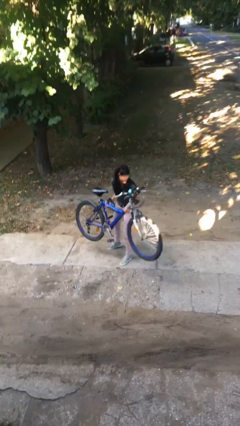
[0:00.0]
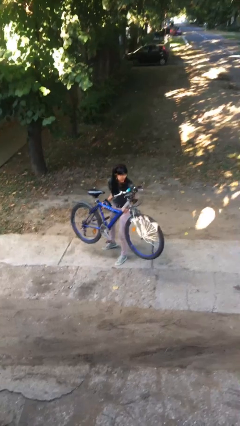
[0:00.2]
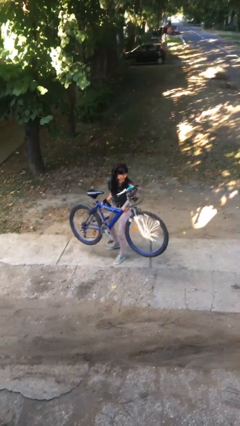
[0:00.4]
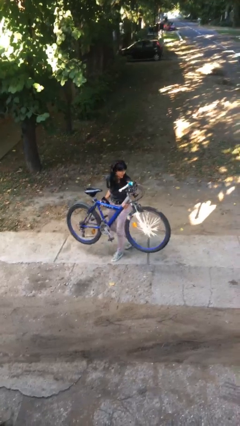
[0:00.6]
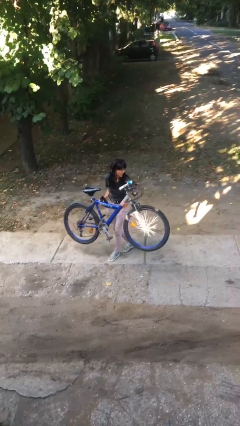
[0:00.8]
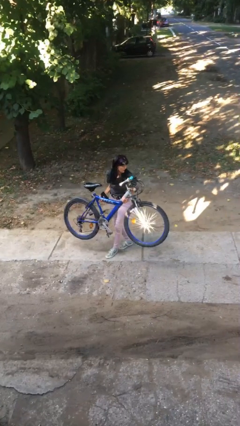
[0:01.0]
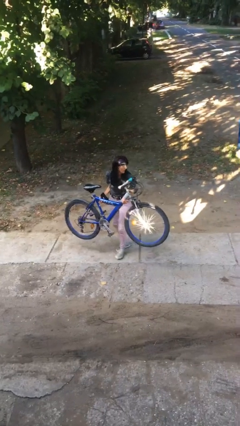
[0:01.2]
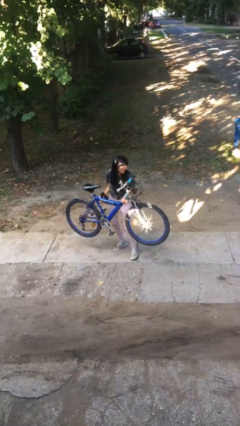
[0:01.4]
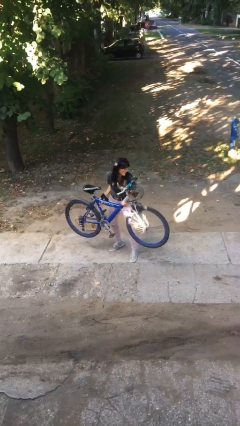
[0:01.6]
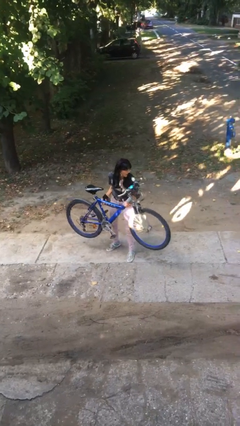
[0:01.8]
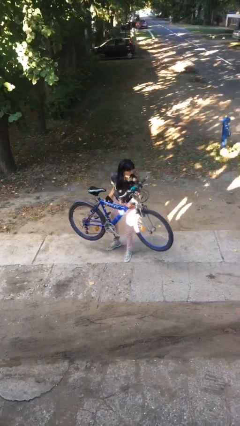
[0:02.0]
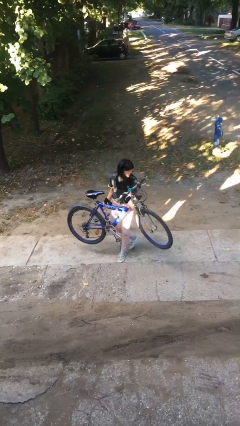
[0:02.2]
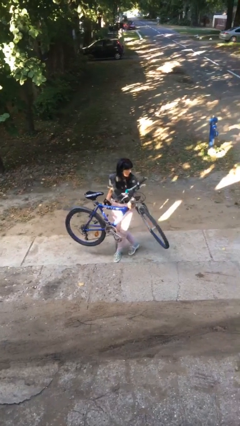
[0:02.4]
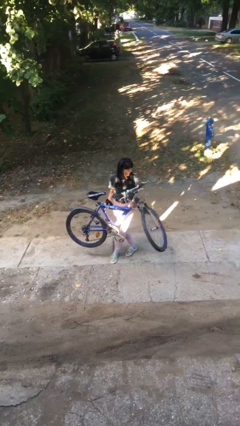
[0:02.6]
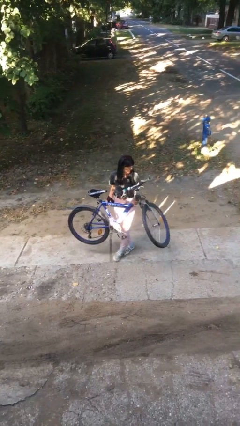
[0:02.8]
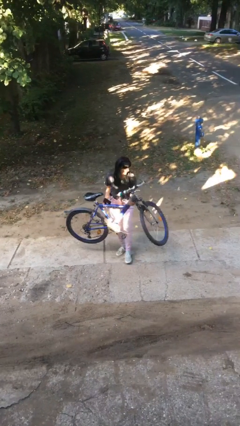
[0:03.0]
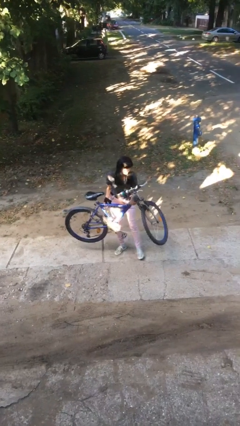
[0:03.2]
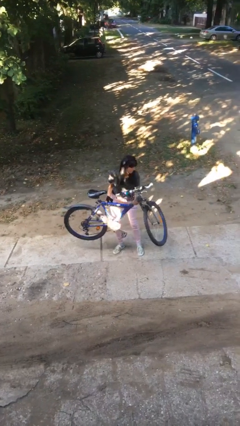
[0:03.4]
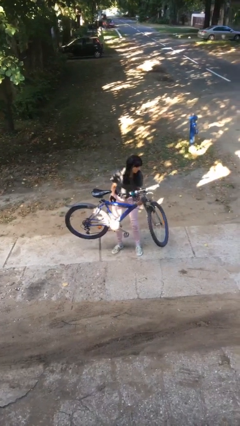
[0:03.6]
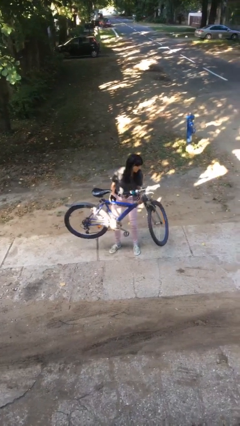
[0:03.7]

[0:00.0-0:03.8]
person carries heavy object

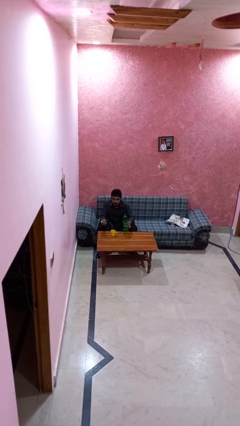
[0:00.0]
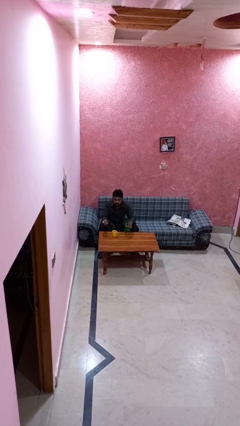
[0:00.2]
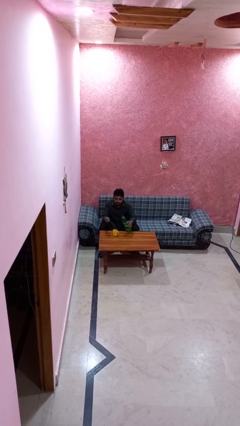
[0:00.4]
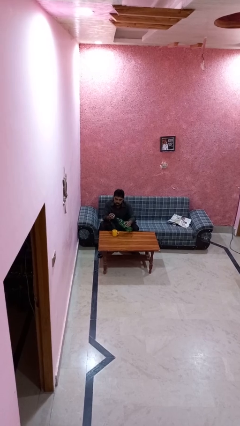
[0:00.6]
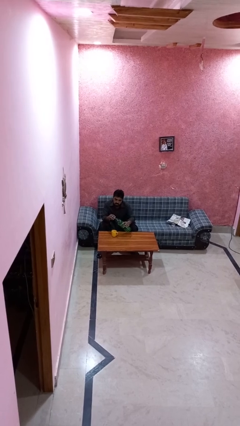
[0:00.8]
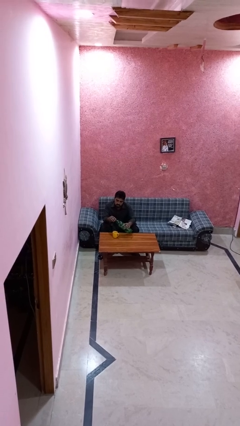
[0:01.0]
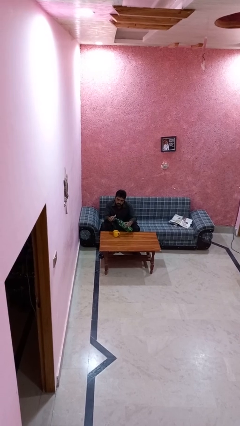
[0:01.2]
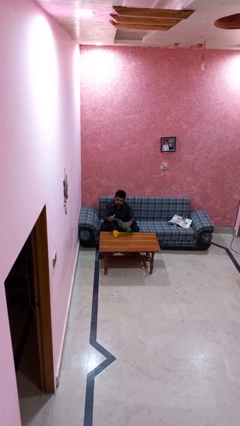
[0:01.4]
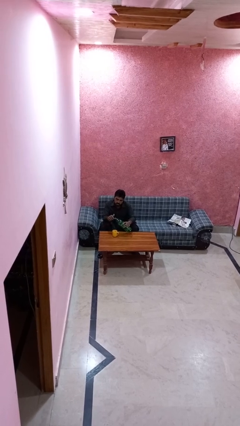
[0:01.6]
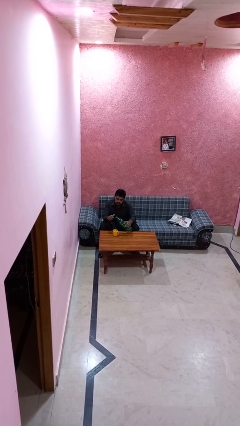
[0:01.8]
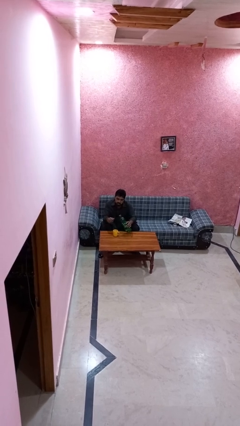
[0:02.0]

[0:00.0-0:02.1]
person screws lid to bottle

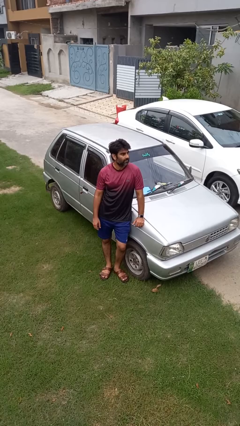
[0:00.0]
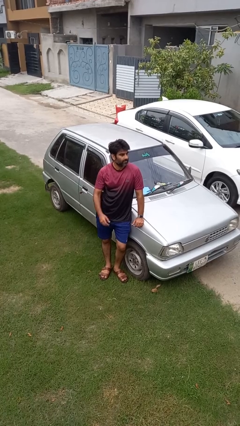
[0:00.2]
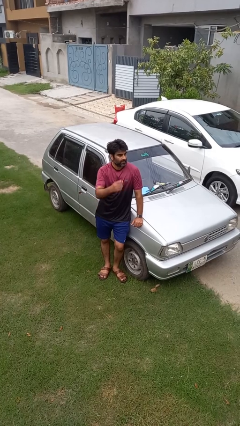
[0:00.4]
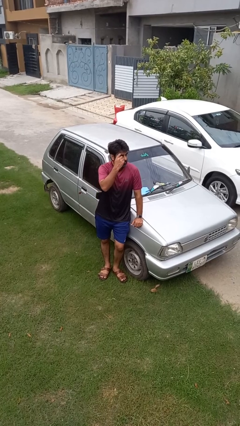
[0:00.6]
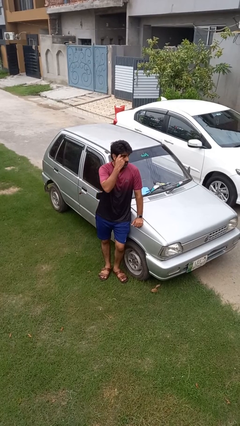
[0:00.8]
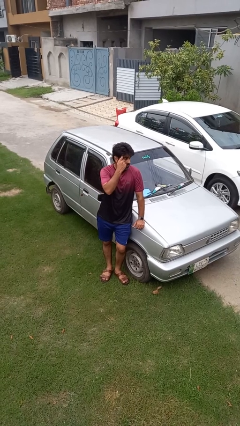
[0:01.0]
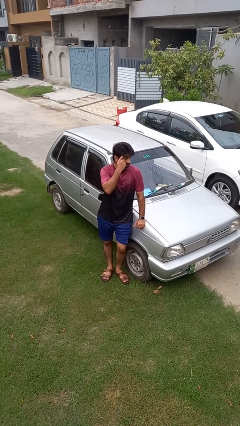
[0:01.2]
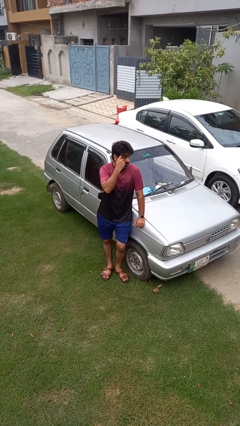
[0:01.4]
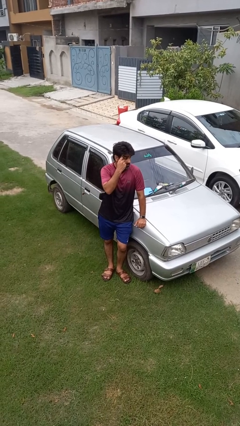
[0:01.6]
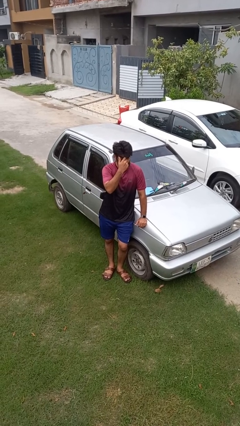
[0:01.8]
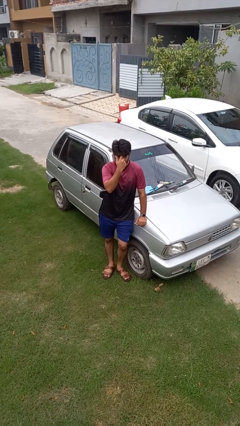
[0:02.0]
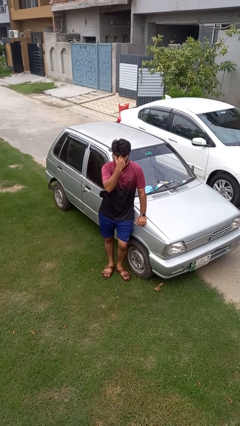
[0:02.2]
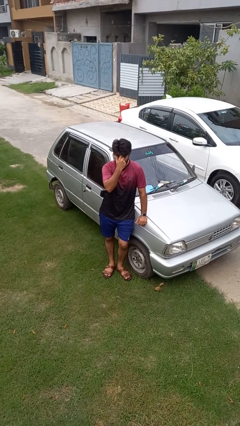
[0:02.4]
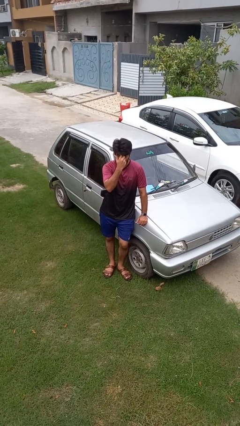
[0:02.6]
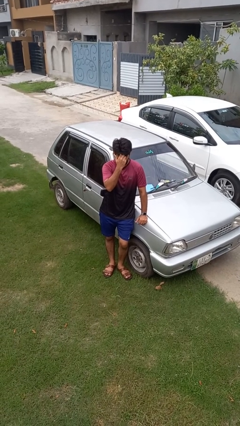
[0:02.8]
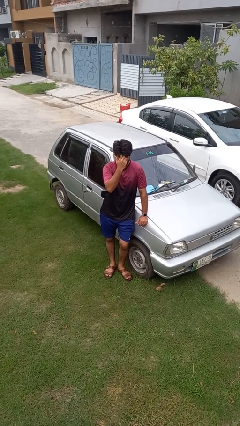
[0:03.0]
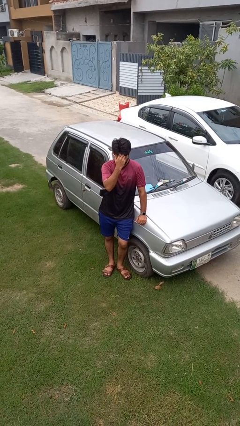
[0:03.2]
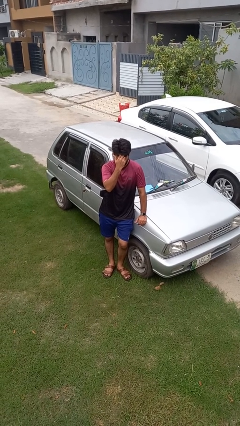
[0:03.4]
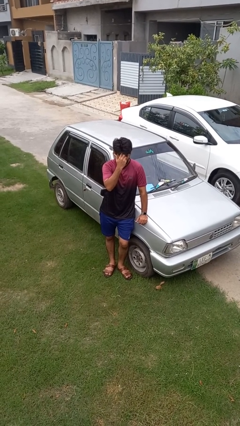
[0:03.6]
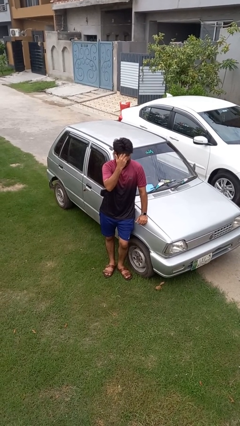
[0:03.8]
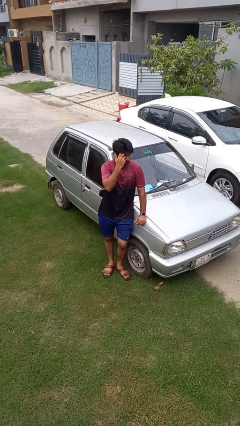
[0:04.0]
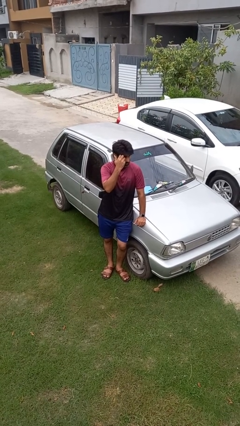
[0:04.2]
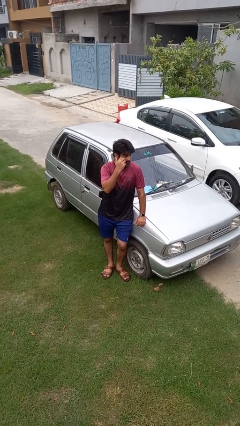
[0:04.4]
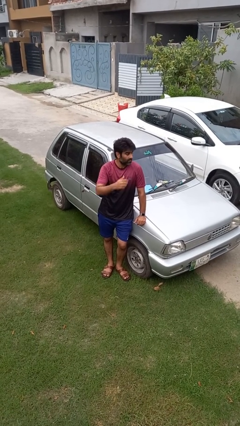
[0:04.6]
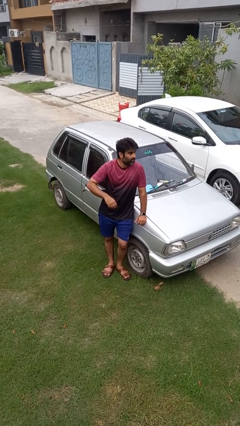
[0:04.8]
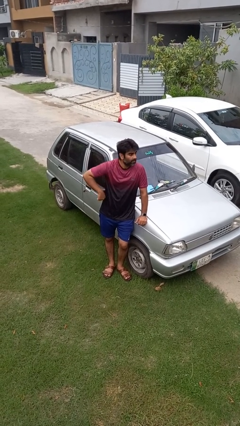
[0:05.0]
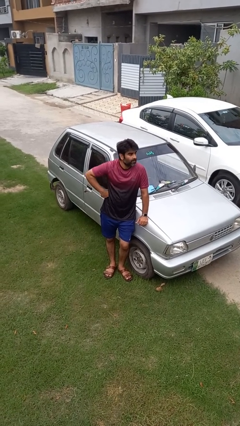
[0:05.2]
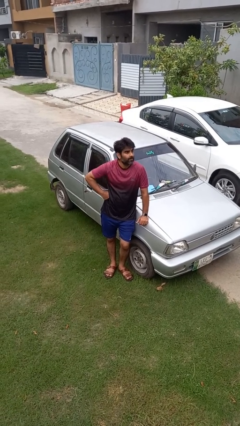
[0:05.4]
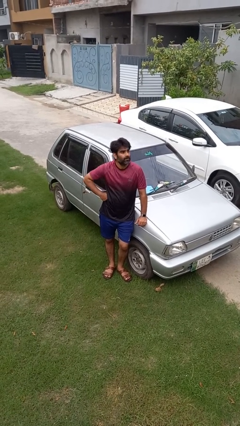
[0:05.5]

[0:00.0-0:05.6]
person scratches face

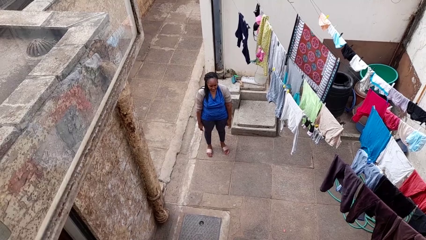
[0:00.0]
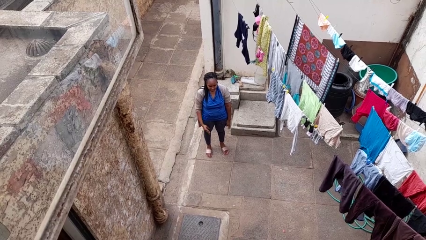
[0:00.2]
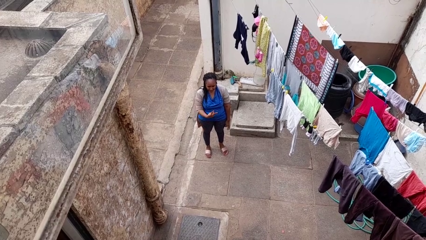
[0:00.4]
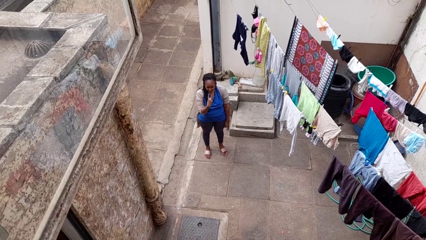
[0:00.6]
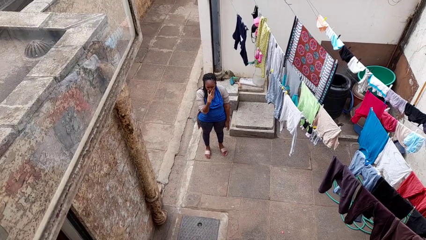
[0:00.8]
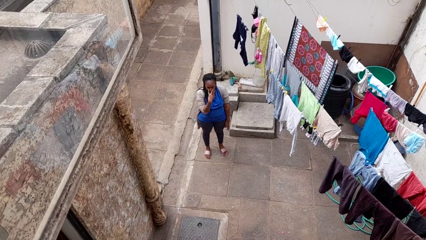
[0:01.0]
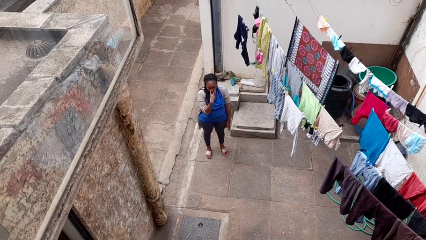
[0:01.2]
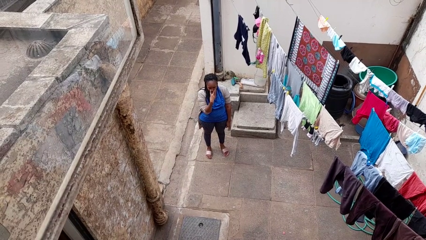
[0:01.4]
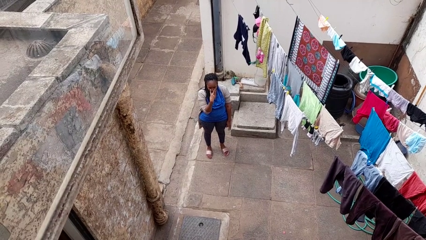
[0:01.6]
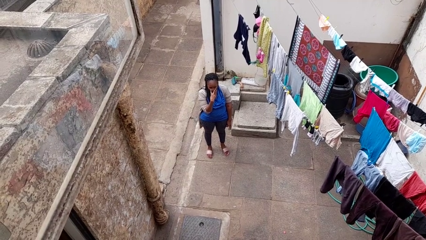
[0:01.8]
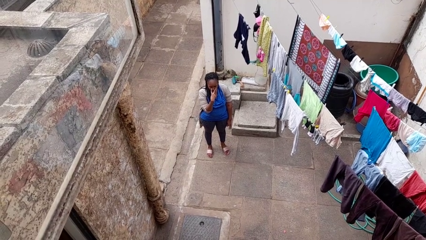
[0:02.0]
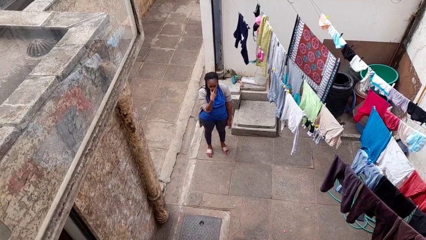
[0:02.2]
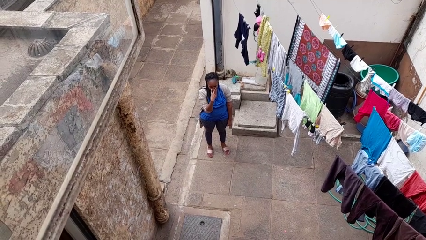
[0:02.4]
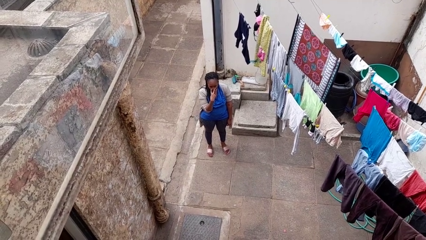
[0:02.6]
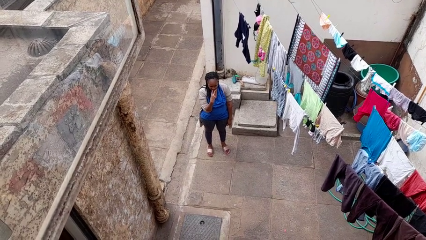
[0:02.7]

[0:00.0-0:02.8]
person gestures watch closely

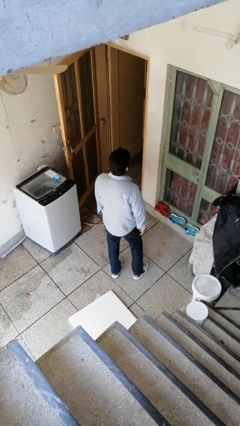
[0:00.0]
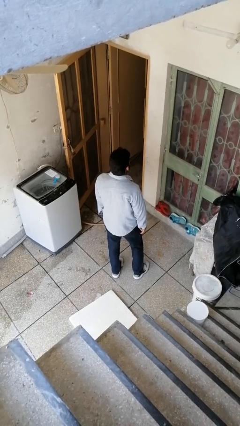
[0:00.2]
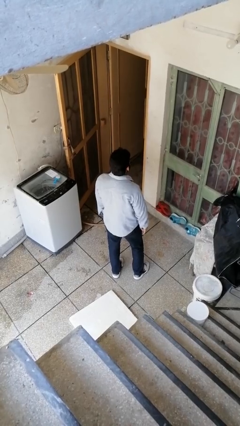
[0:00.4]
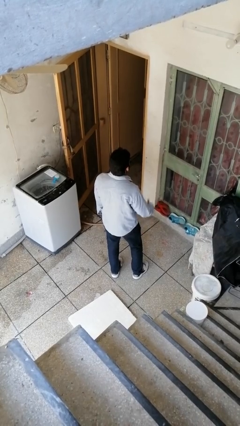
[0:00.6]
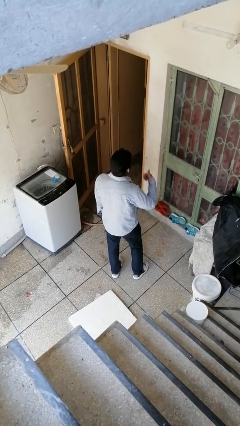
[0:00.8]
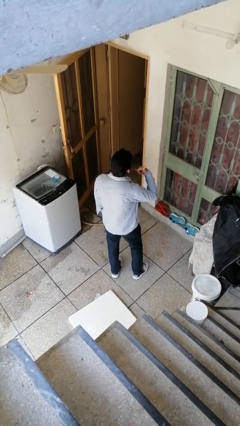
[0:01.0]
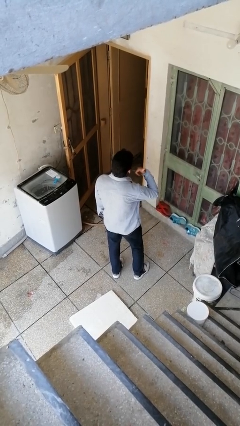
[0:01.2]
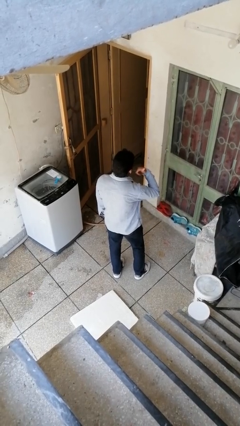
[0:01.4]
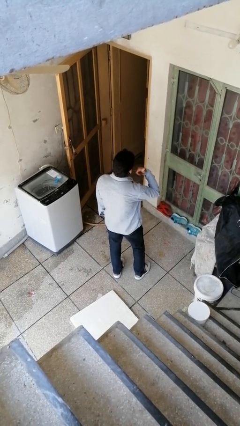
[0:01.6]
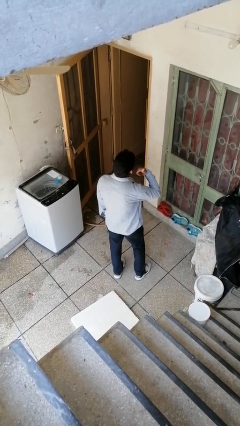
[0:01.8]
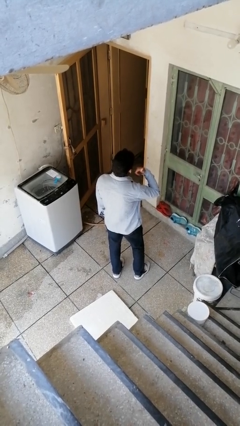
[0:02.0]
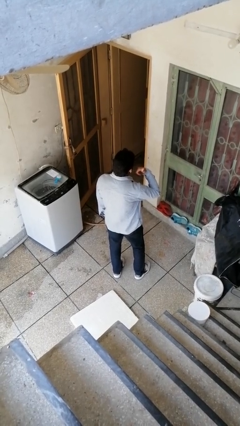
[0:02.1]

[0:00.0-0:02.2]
person gestures call me

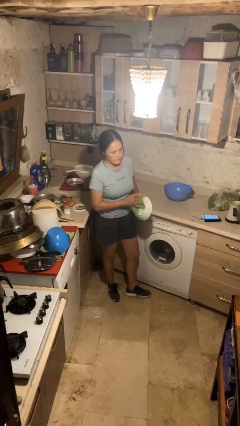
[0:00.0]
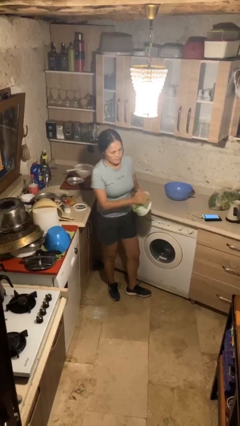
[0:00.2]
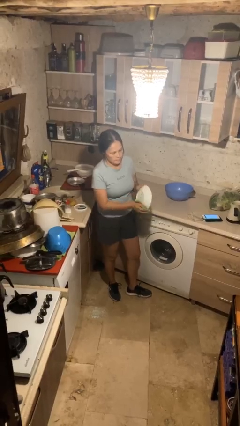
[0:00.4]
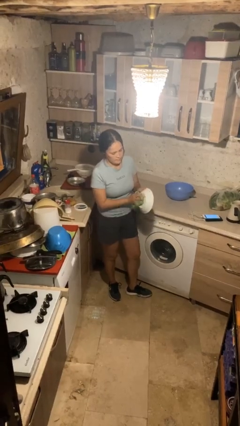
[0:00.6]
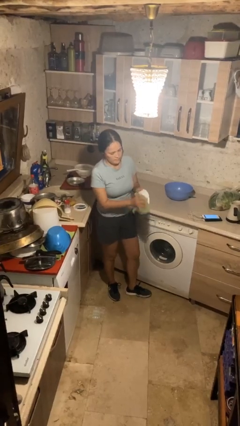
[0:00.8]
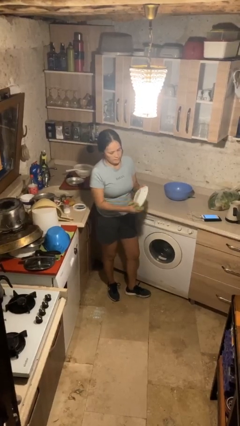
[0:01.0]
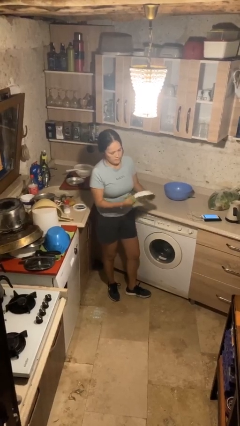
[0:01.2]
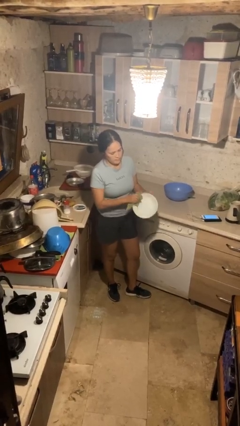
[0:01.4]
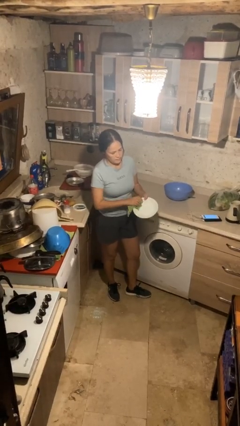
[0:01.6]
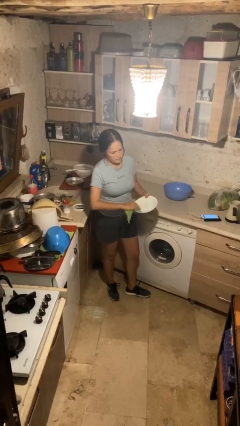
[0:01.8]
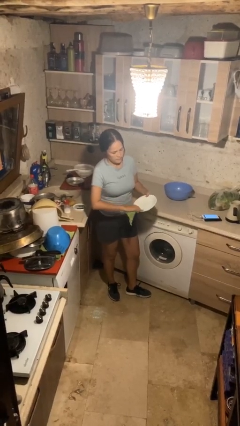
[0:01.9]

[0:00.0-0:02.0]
person dries dish
